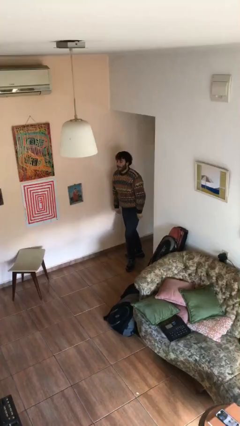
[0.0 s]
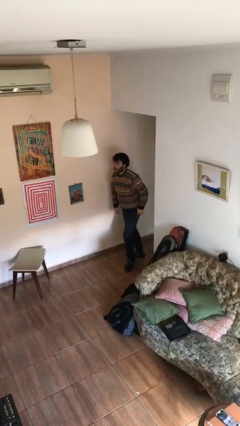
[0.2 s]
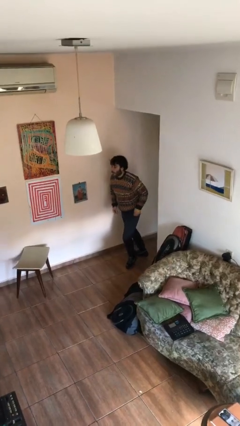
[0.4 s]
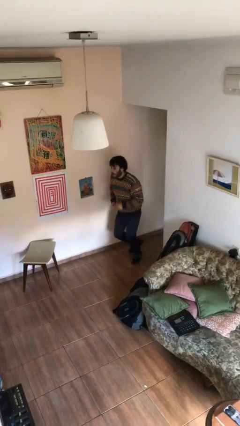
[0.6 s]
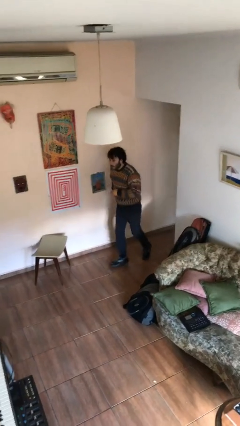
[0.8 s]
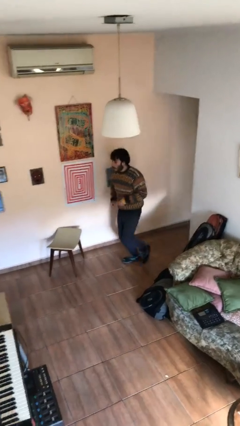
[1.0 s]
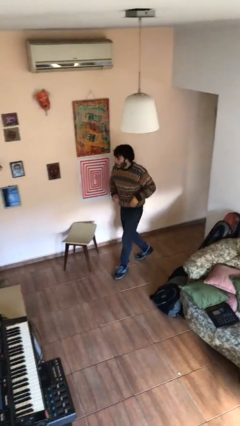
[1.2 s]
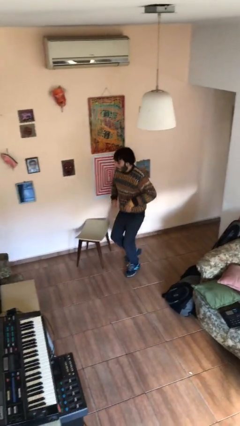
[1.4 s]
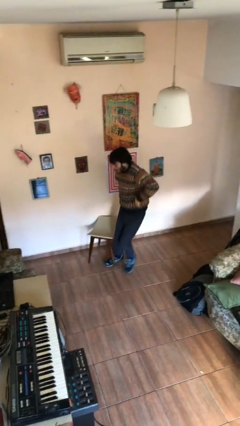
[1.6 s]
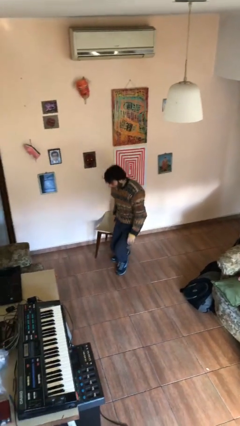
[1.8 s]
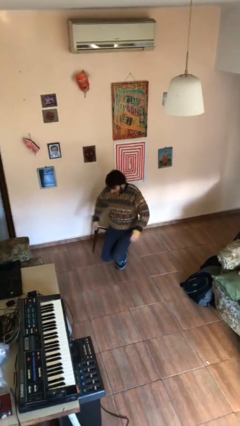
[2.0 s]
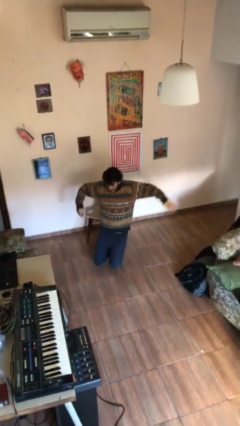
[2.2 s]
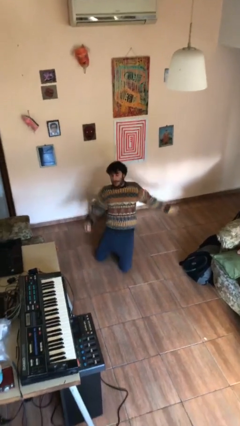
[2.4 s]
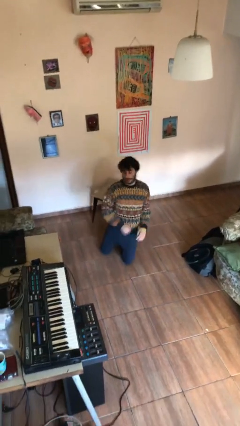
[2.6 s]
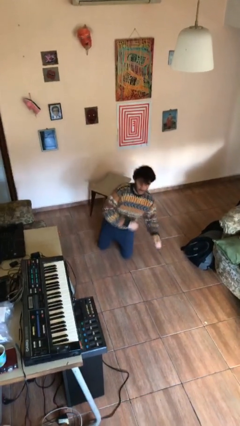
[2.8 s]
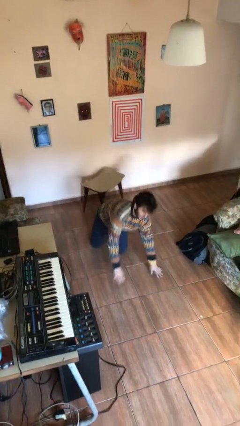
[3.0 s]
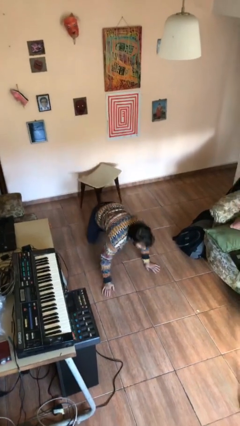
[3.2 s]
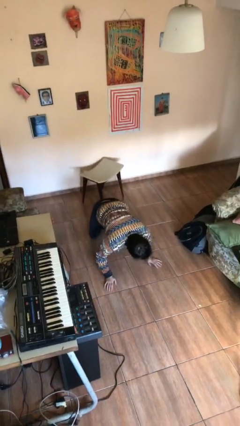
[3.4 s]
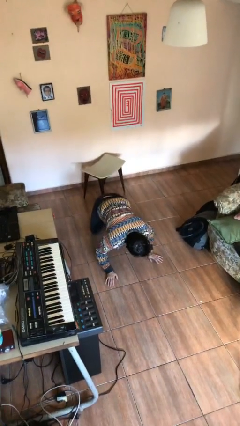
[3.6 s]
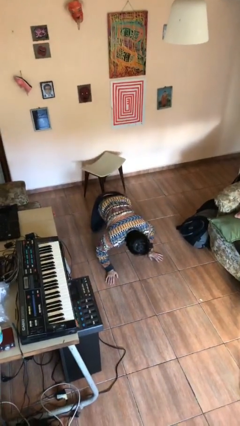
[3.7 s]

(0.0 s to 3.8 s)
person trips on object on floor

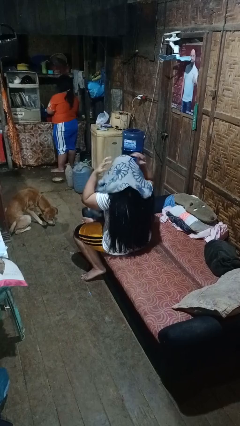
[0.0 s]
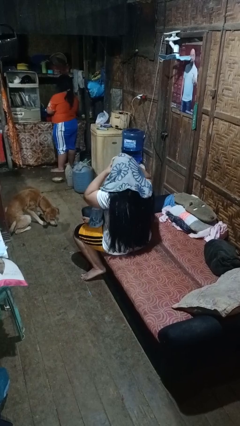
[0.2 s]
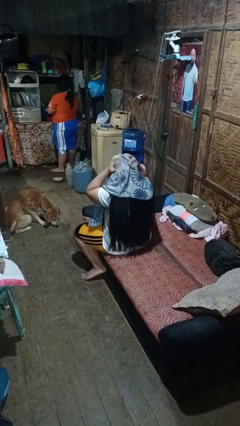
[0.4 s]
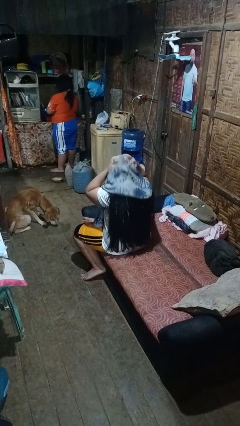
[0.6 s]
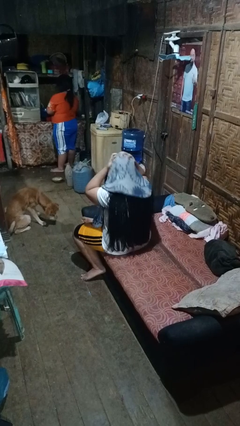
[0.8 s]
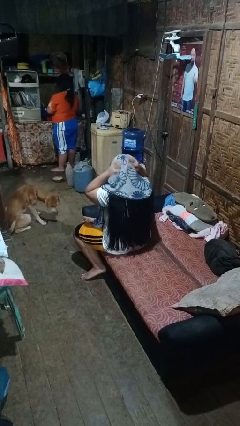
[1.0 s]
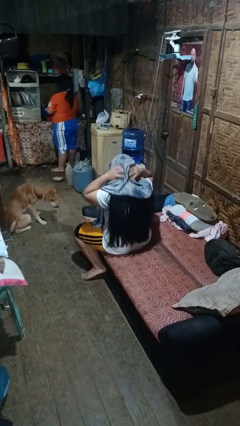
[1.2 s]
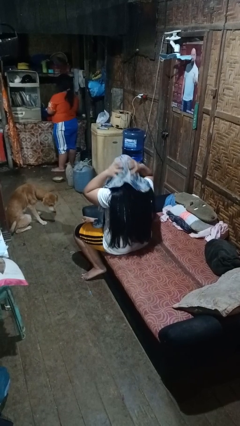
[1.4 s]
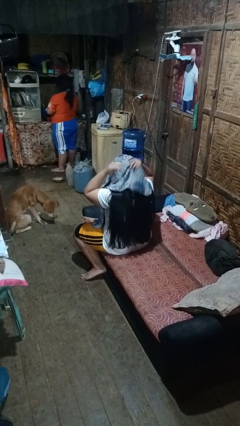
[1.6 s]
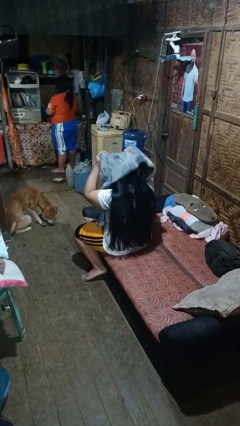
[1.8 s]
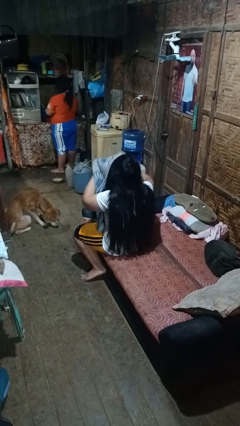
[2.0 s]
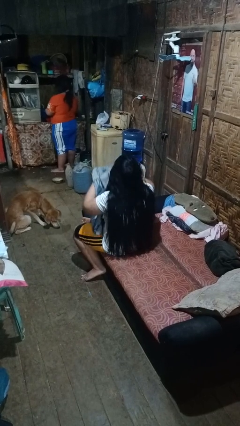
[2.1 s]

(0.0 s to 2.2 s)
person dries hair with towel

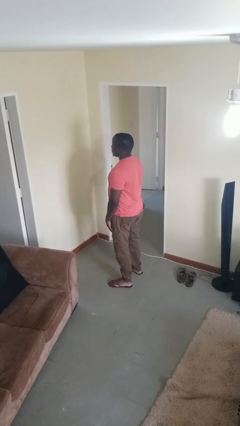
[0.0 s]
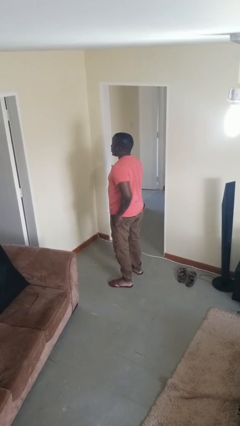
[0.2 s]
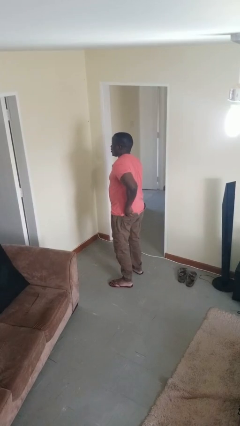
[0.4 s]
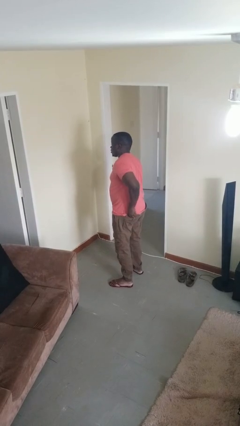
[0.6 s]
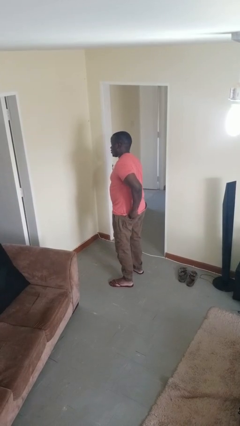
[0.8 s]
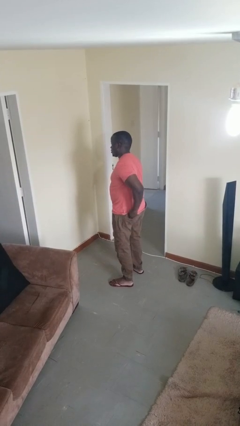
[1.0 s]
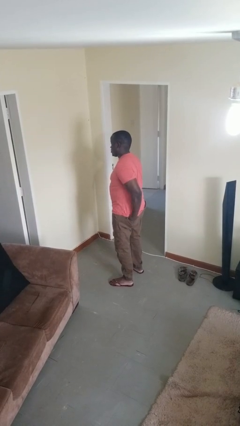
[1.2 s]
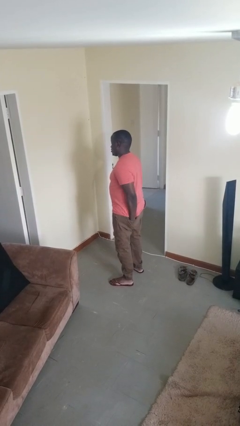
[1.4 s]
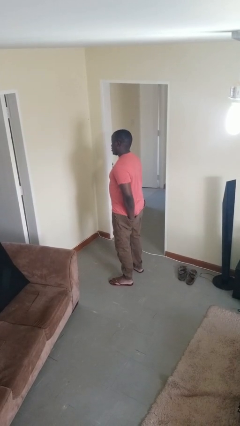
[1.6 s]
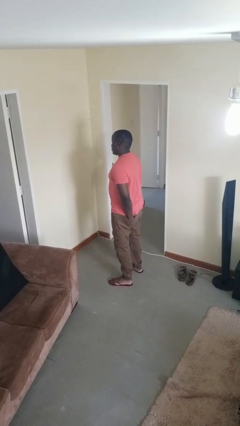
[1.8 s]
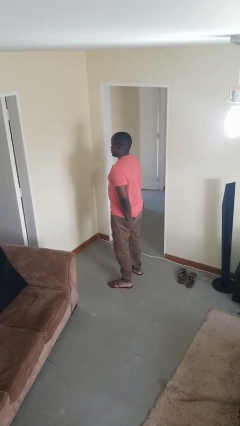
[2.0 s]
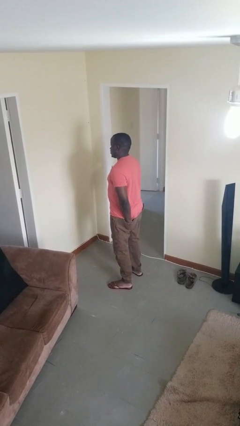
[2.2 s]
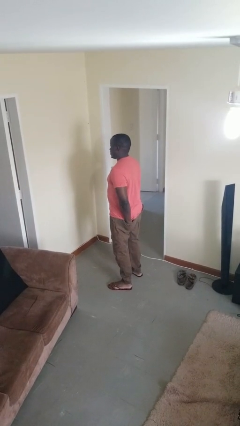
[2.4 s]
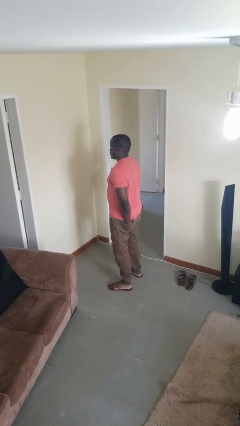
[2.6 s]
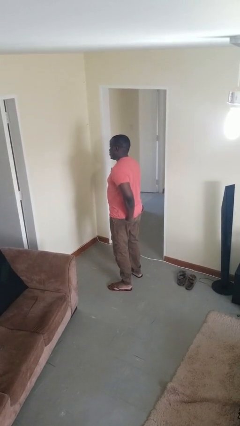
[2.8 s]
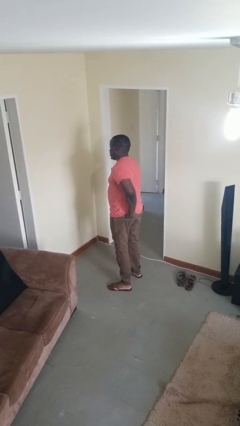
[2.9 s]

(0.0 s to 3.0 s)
person puts hands in back pockets

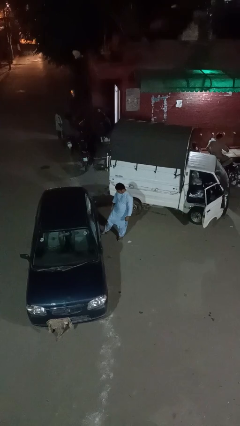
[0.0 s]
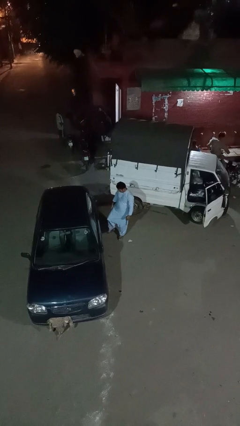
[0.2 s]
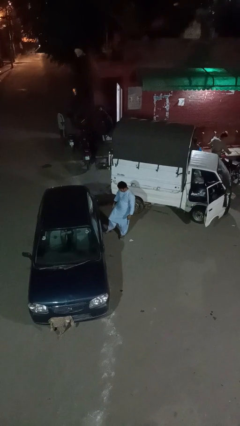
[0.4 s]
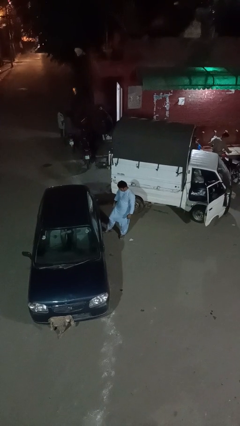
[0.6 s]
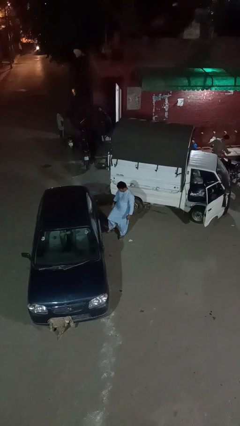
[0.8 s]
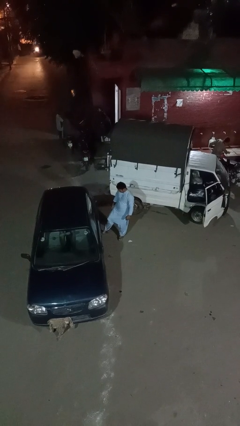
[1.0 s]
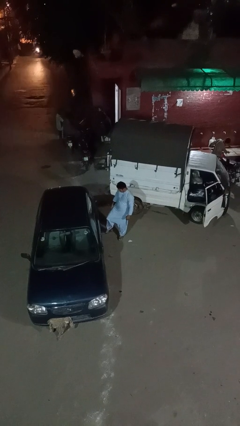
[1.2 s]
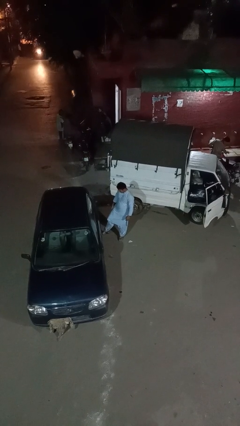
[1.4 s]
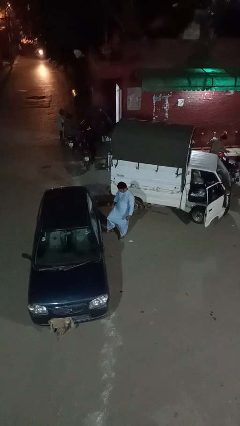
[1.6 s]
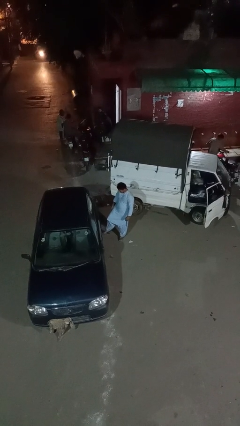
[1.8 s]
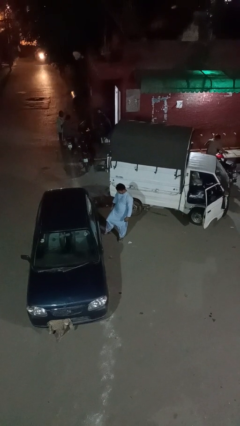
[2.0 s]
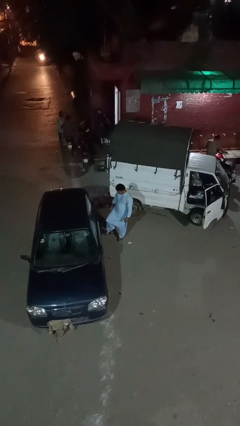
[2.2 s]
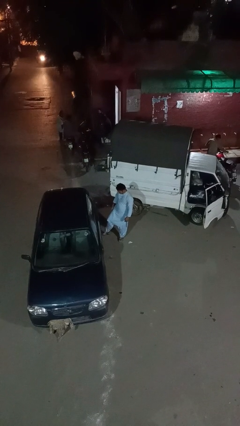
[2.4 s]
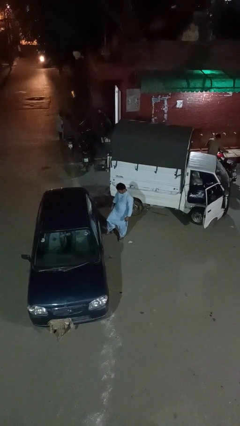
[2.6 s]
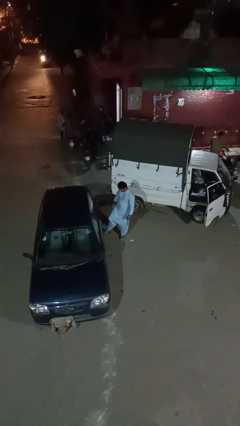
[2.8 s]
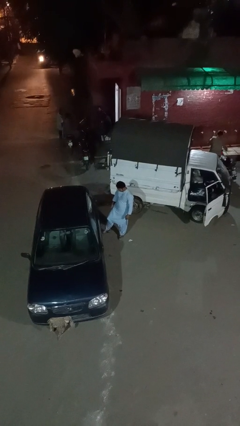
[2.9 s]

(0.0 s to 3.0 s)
person kicks car tires

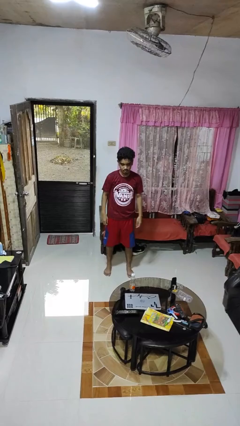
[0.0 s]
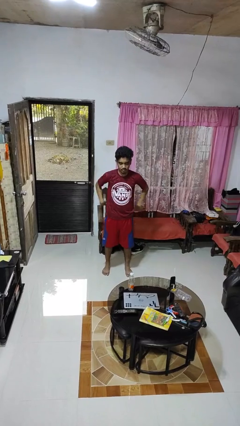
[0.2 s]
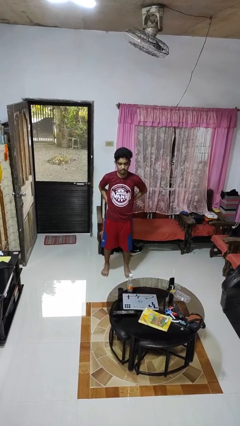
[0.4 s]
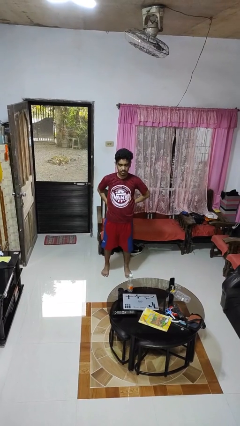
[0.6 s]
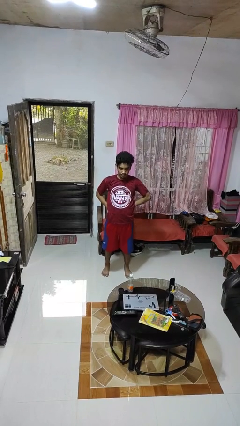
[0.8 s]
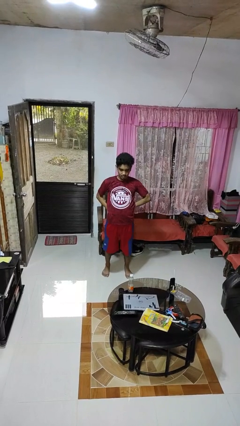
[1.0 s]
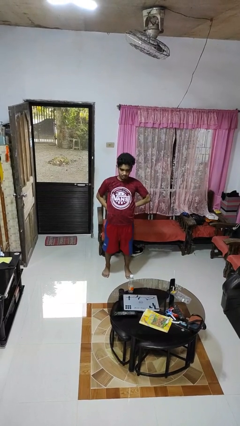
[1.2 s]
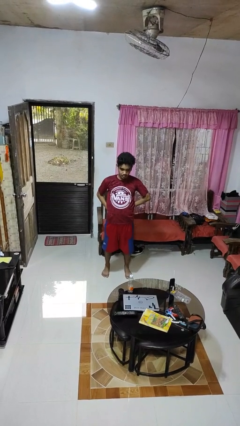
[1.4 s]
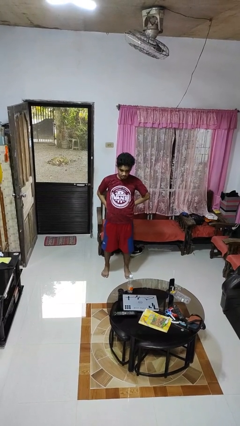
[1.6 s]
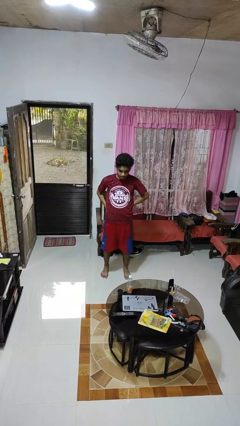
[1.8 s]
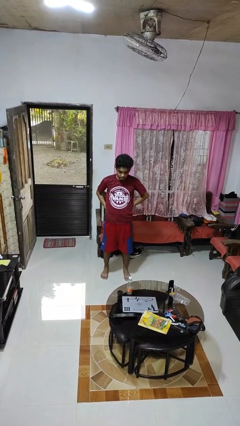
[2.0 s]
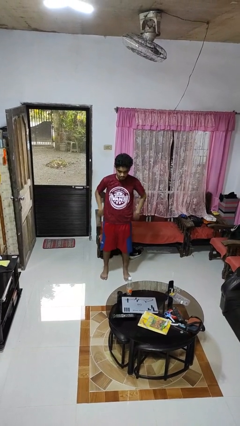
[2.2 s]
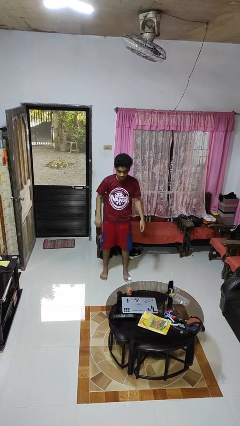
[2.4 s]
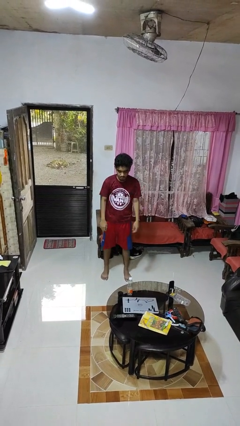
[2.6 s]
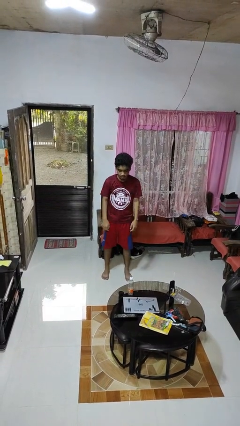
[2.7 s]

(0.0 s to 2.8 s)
person stretches back

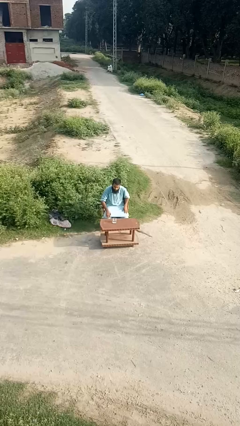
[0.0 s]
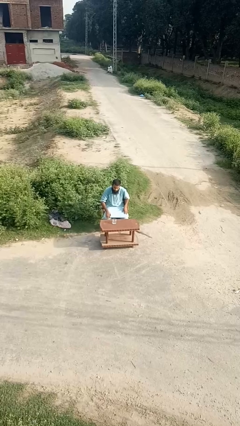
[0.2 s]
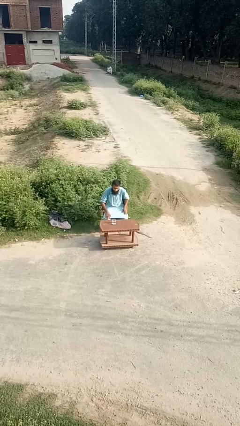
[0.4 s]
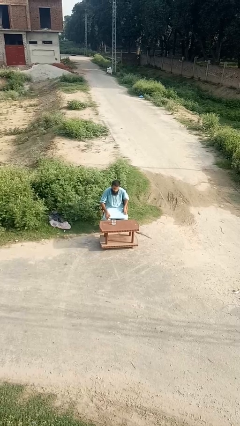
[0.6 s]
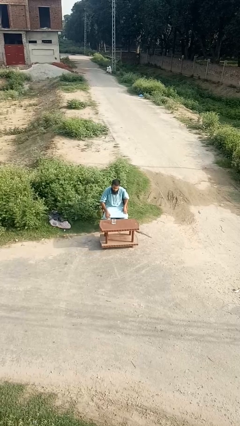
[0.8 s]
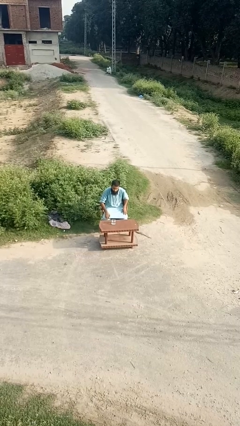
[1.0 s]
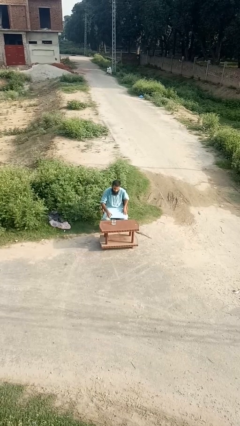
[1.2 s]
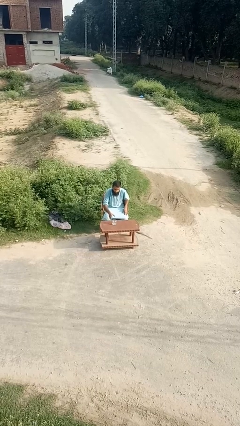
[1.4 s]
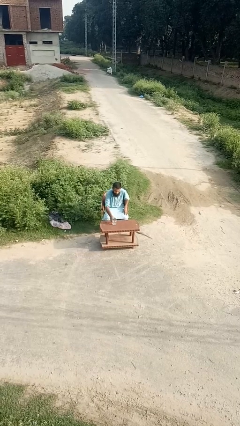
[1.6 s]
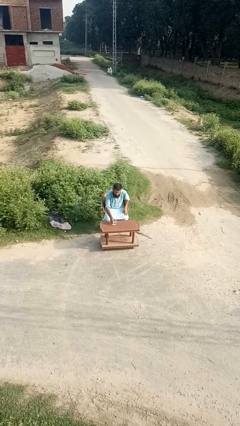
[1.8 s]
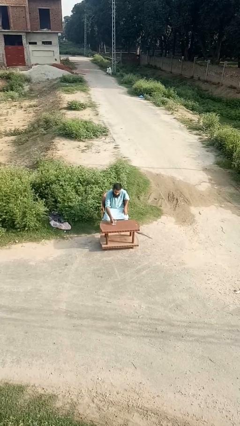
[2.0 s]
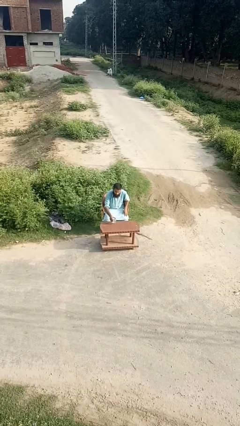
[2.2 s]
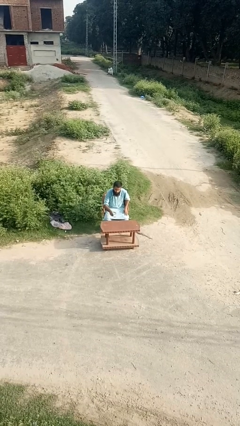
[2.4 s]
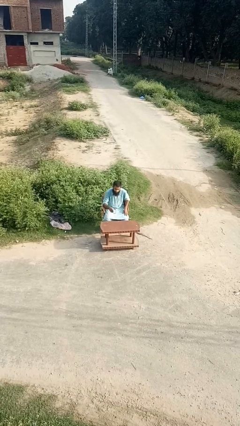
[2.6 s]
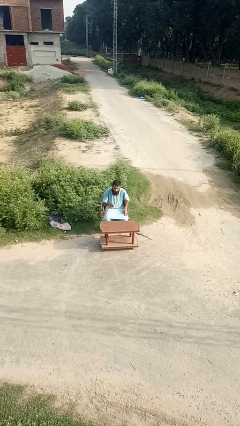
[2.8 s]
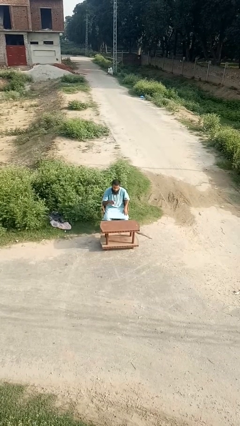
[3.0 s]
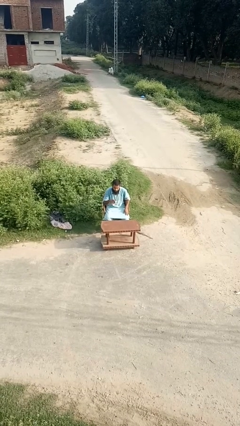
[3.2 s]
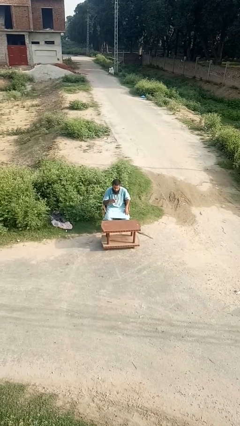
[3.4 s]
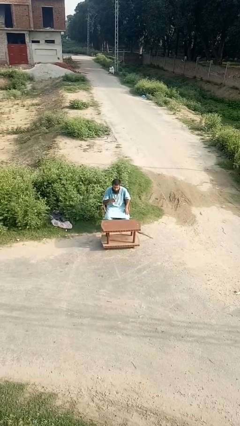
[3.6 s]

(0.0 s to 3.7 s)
person picks up object from table
